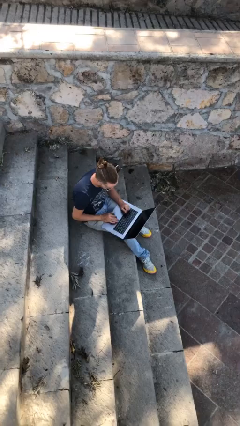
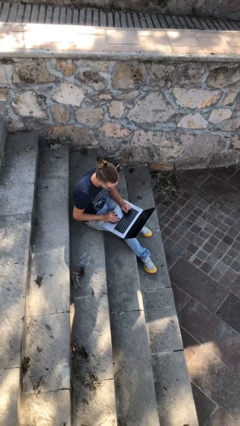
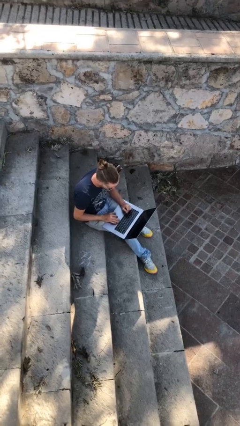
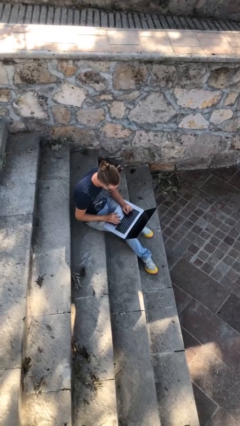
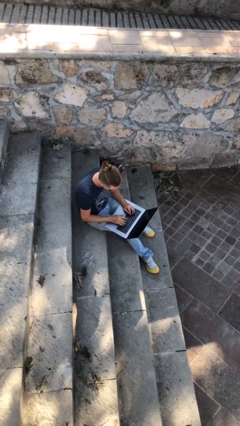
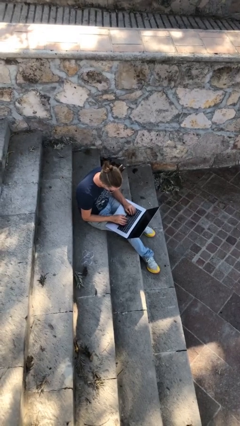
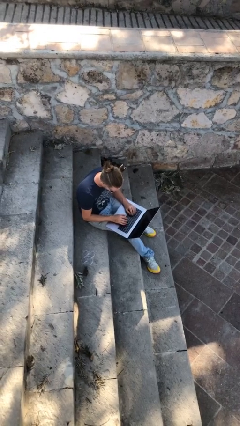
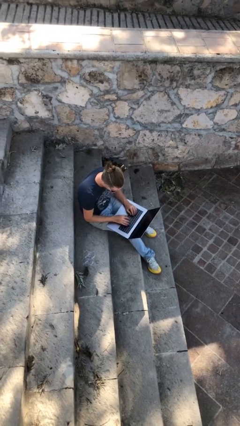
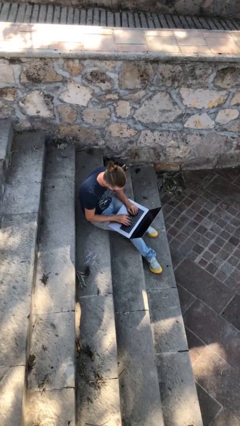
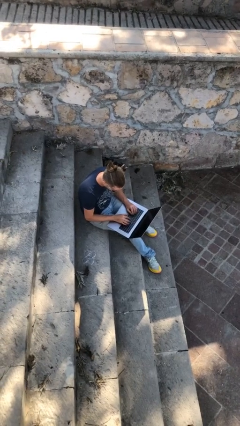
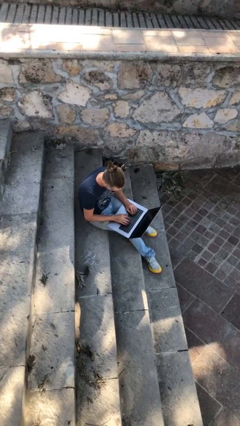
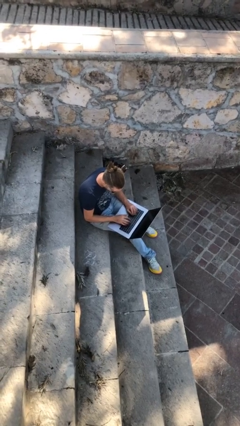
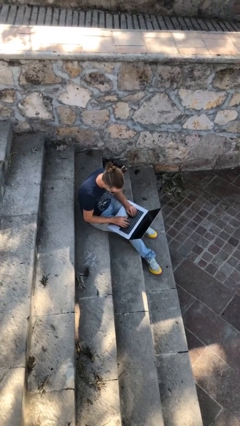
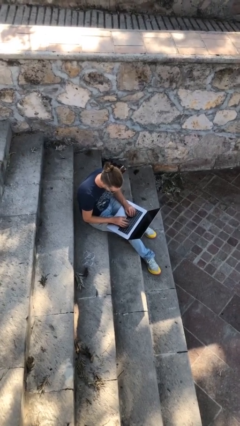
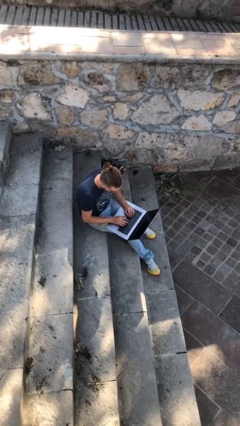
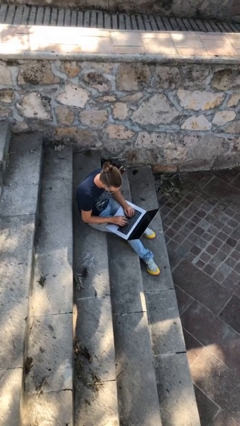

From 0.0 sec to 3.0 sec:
person interacts with laptop

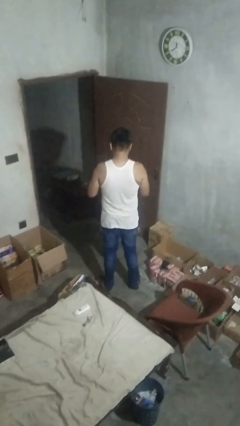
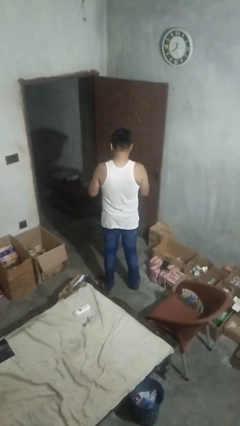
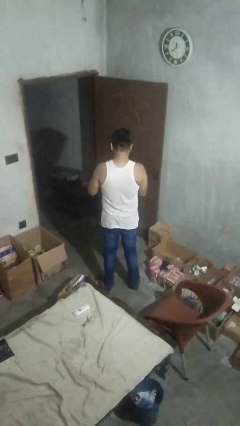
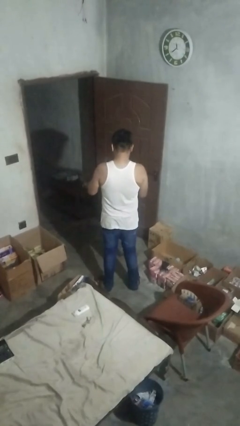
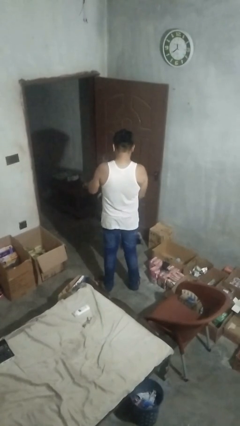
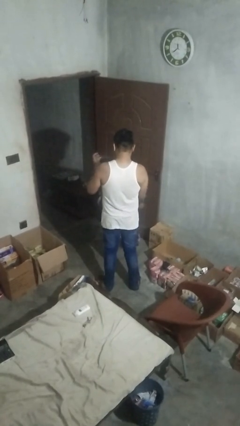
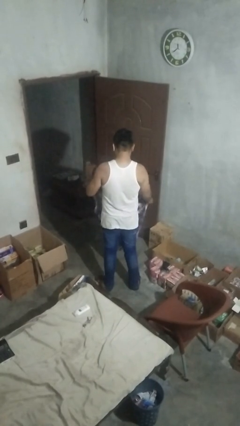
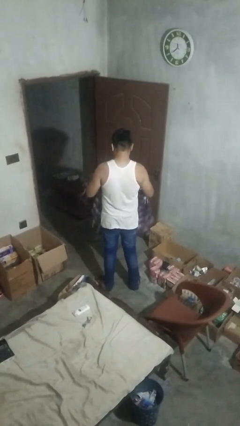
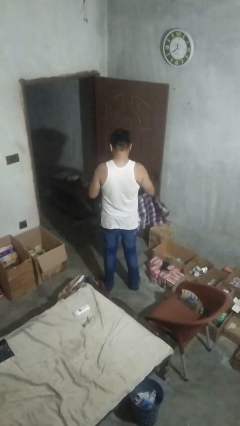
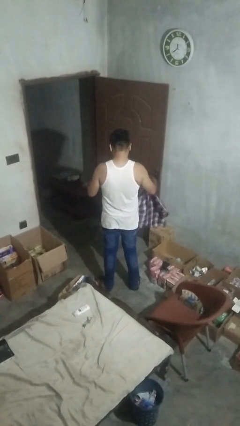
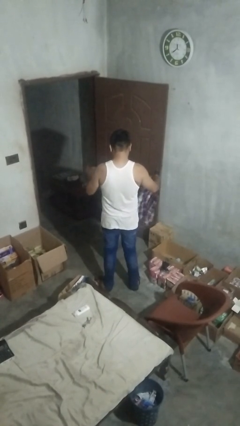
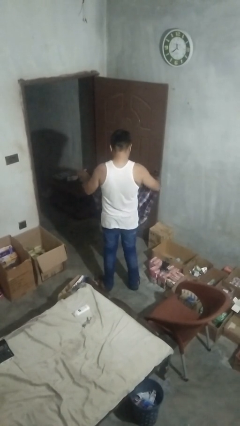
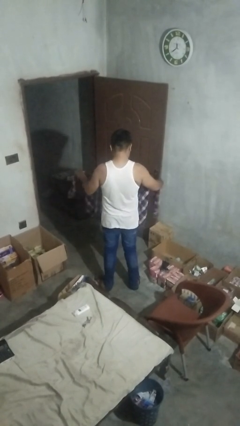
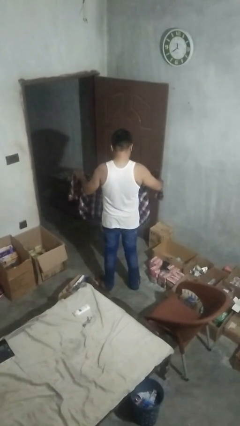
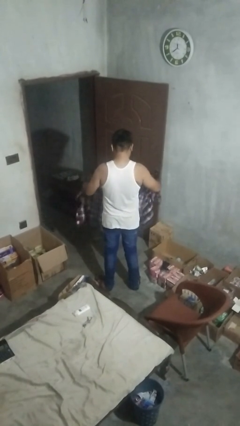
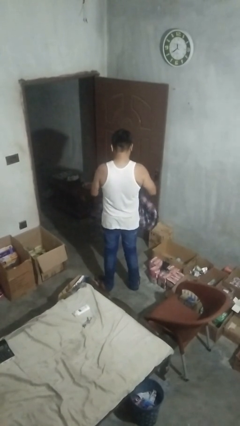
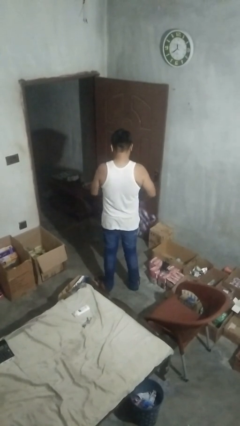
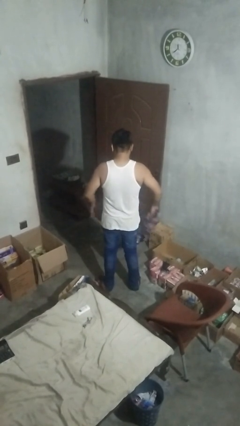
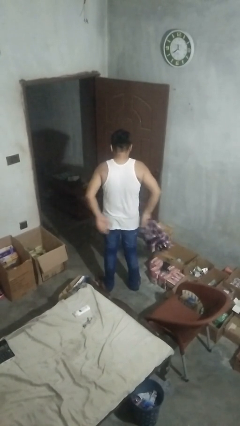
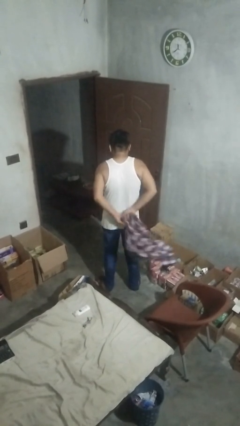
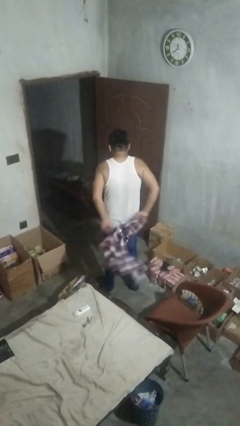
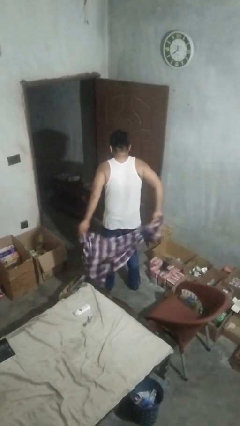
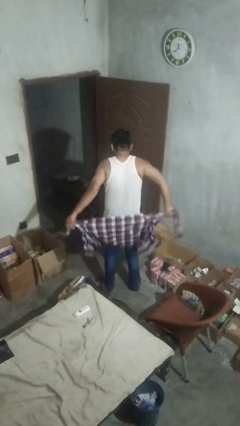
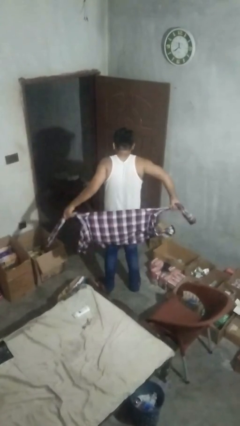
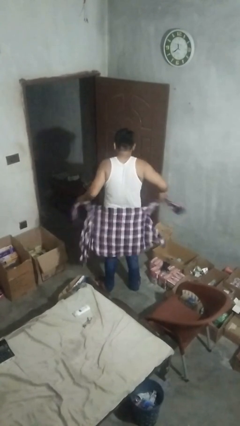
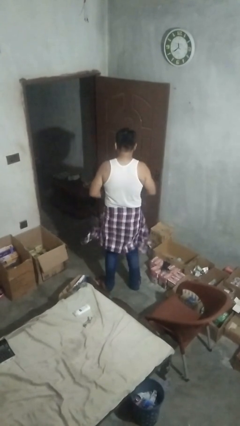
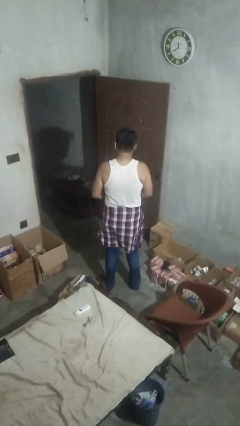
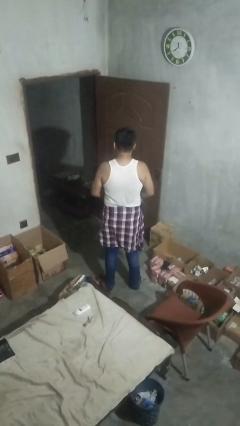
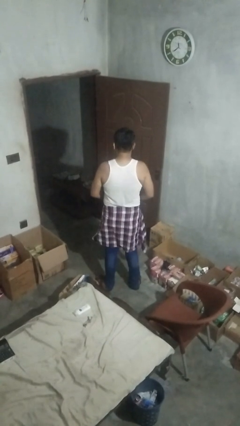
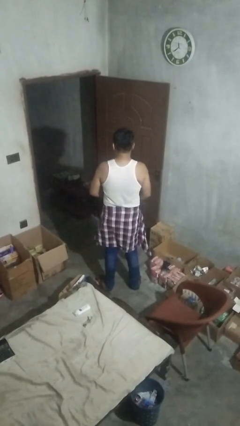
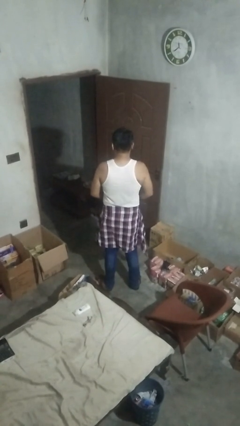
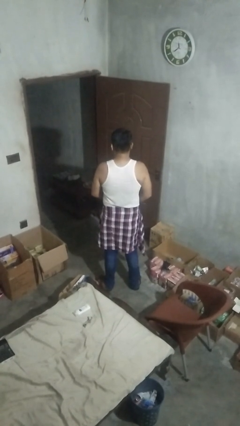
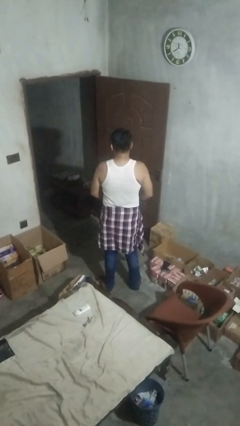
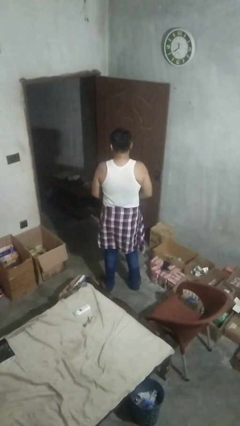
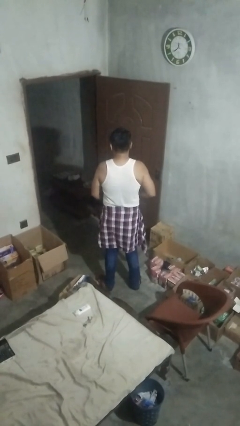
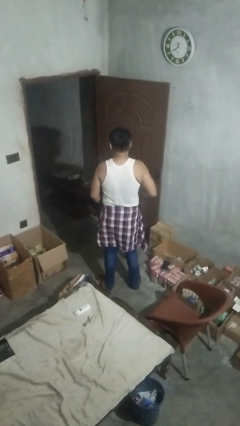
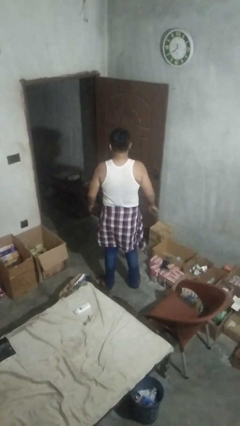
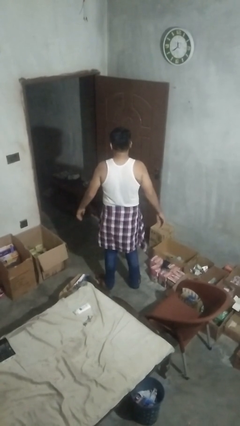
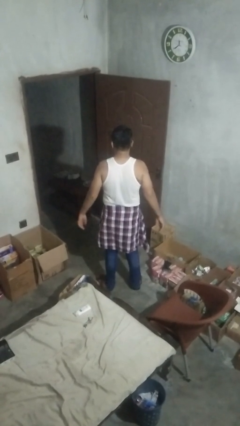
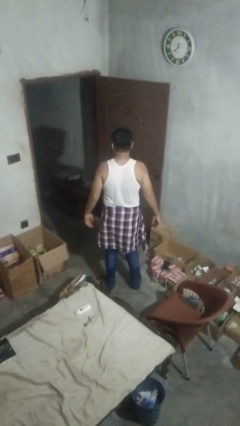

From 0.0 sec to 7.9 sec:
person ties jacket around waist

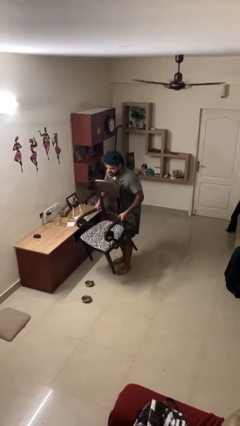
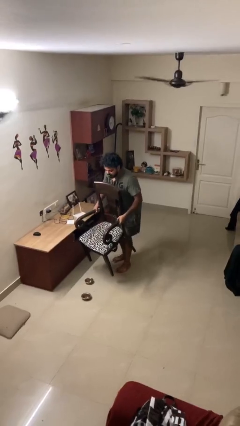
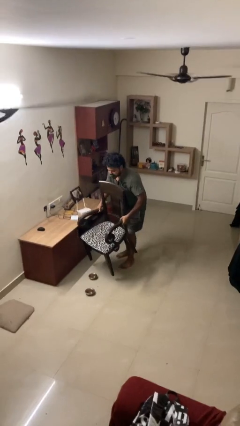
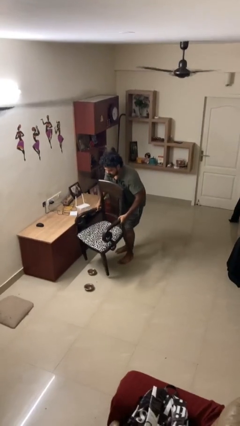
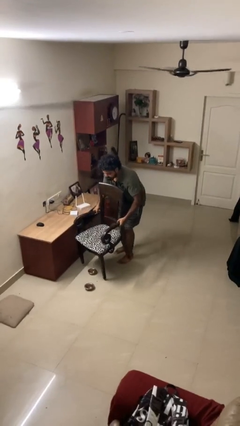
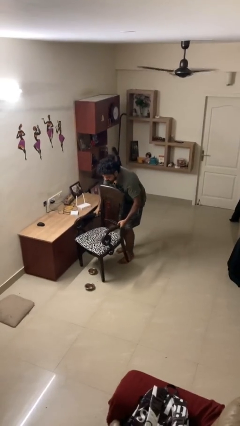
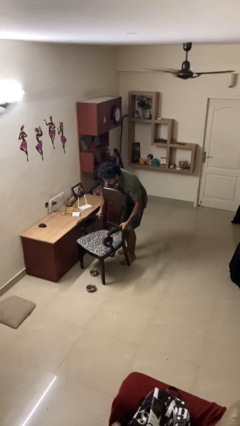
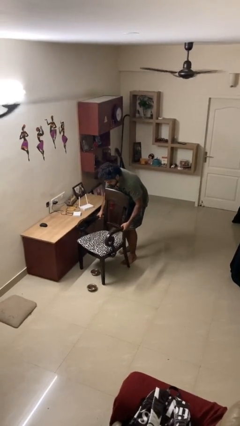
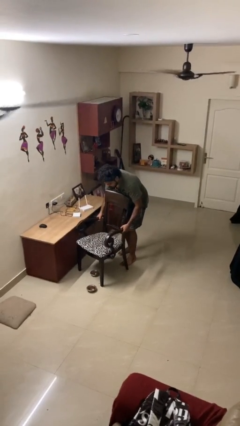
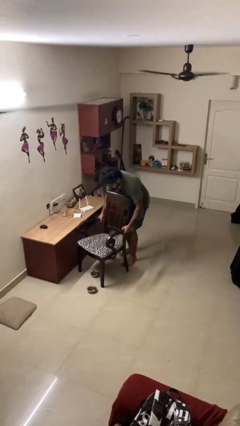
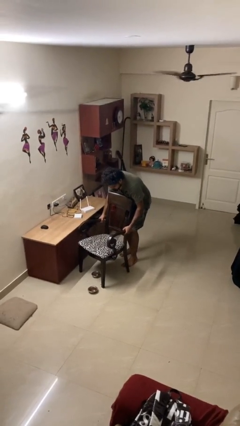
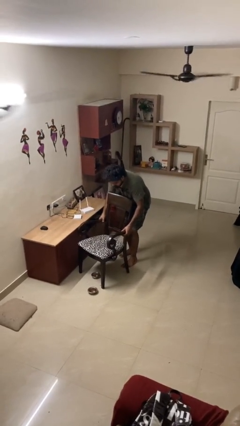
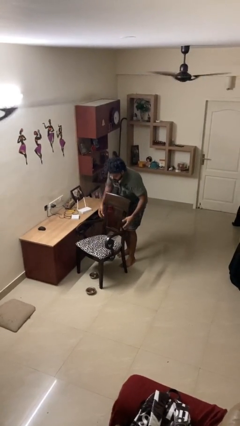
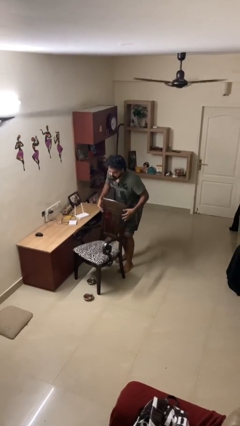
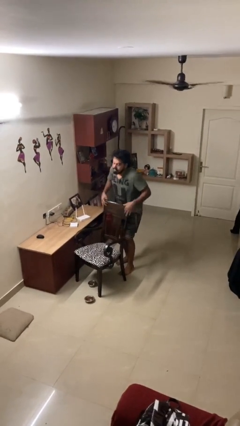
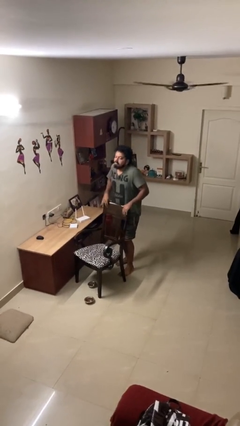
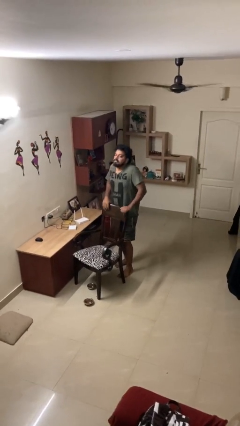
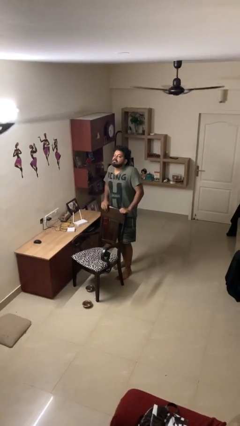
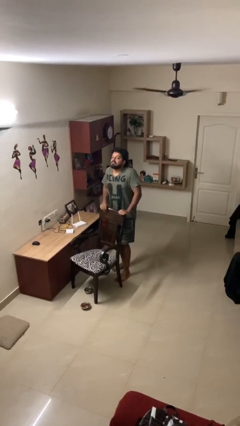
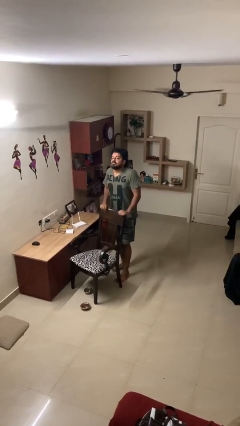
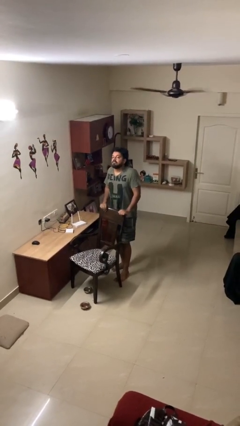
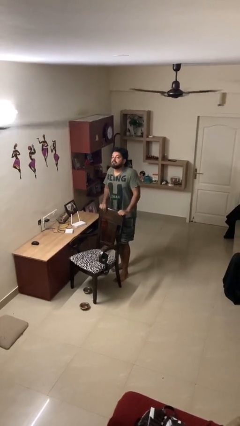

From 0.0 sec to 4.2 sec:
person puts down object on floor

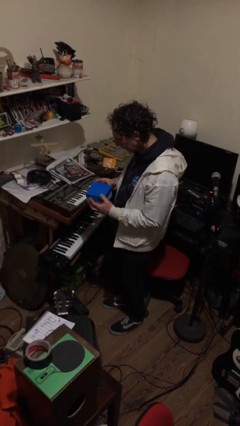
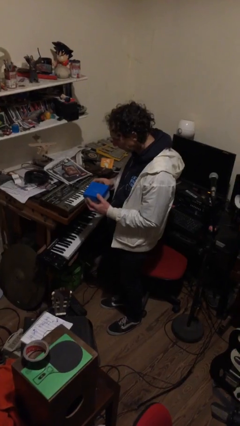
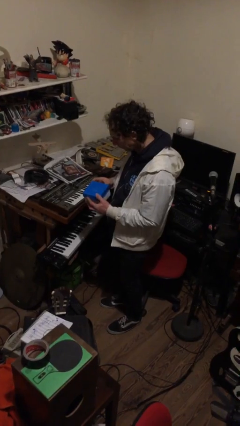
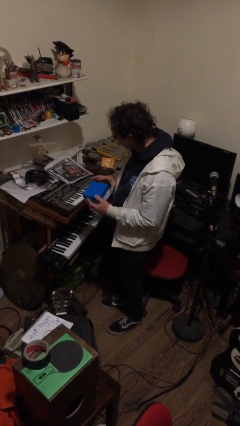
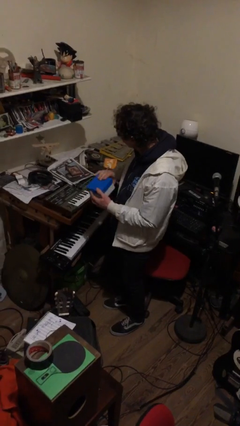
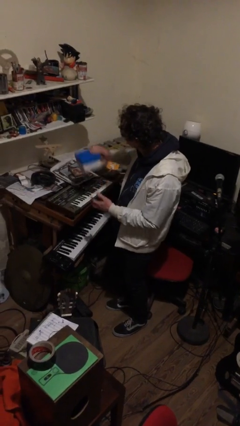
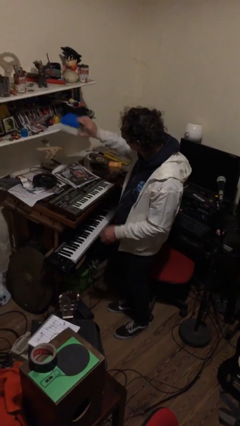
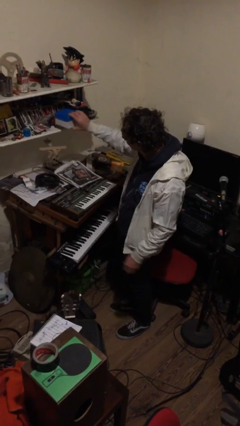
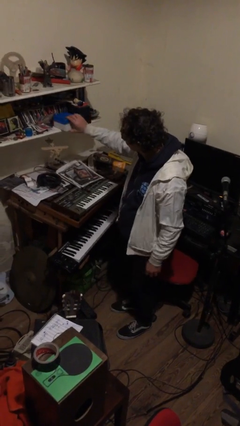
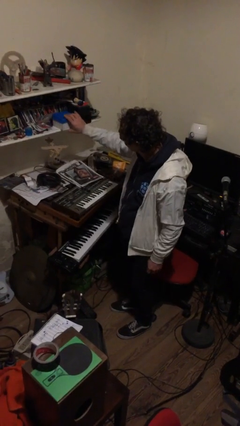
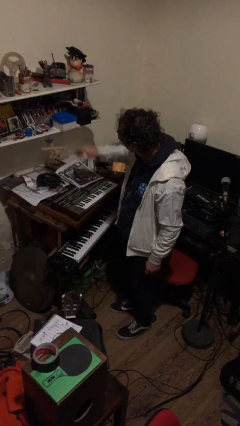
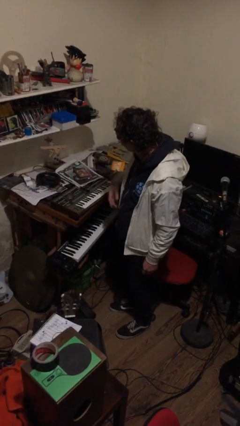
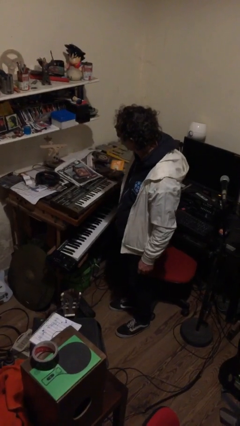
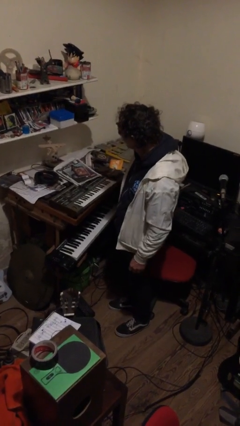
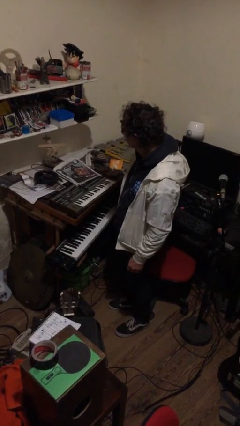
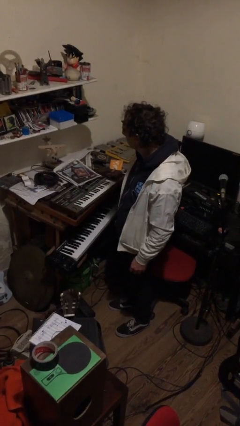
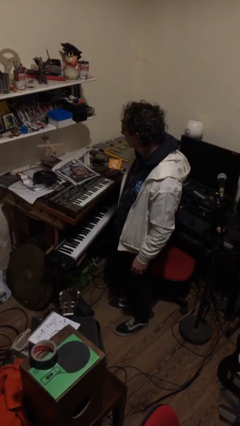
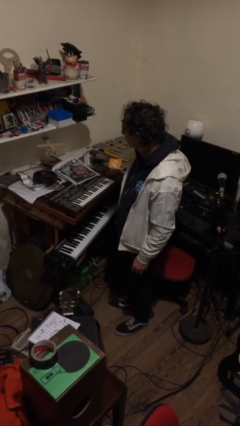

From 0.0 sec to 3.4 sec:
person puts down object on countertop
